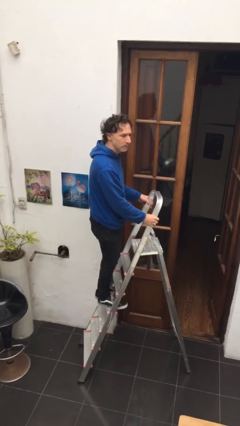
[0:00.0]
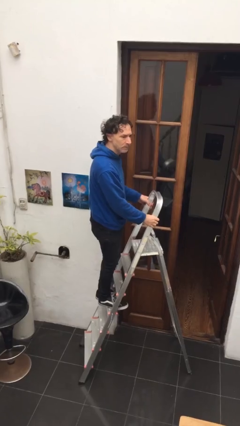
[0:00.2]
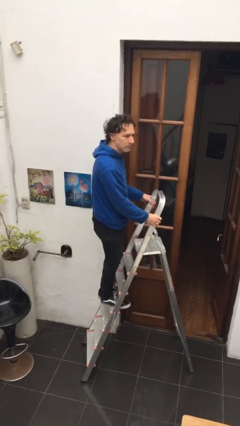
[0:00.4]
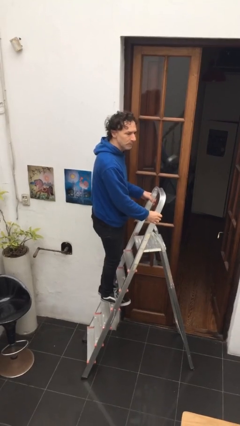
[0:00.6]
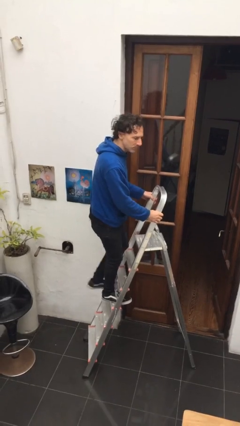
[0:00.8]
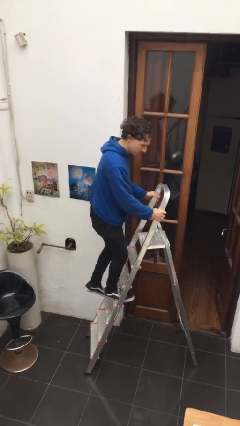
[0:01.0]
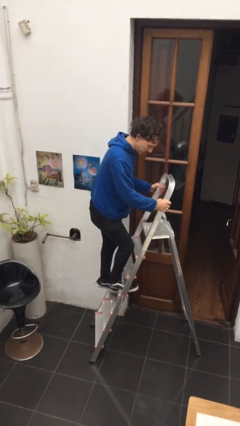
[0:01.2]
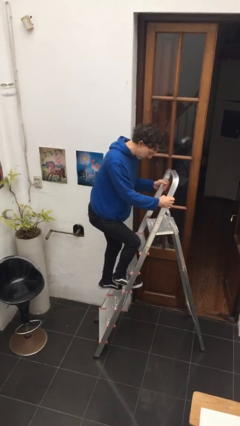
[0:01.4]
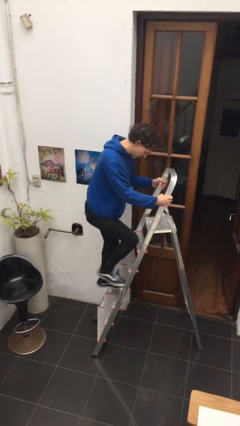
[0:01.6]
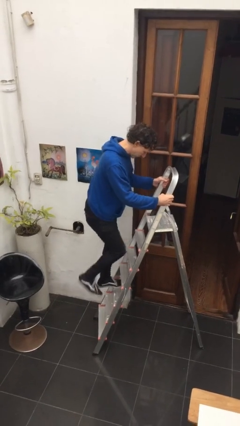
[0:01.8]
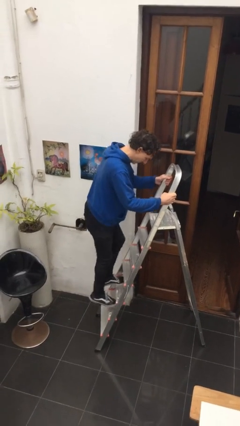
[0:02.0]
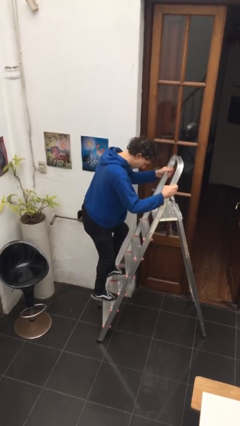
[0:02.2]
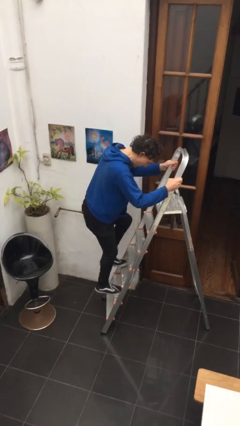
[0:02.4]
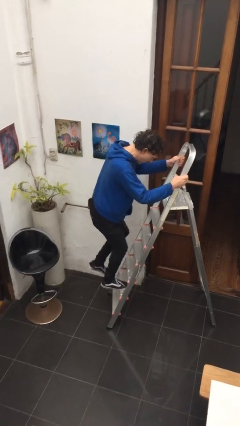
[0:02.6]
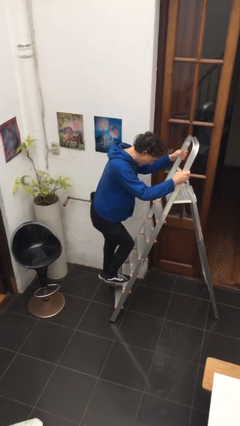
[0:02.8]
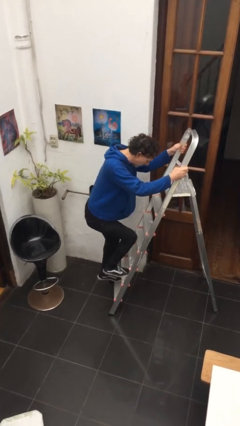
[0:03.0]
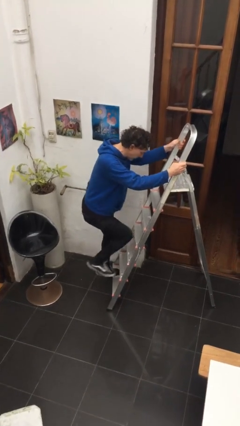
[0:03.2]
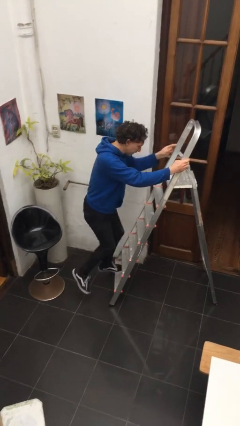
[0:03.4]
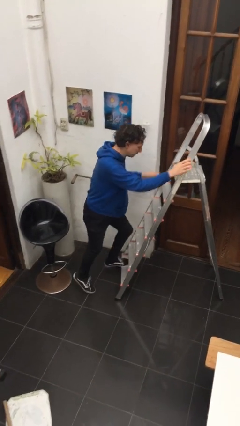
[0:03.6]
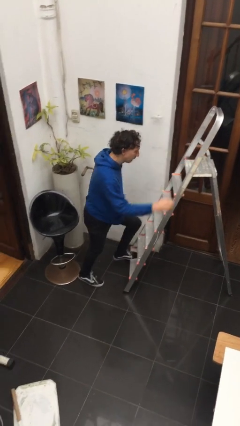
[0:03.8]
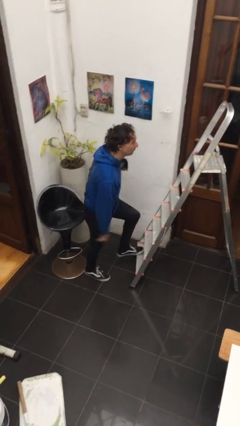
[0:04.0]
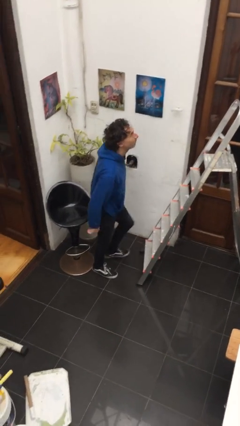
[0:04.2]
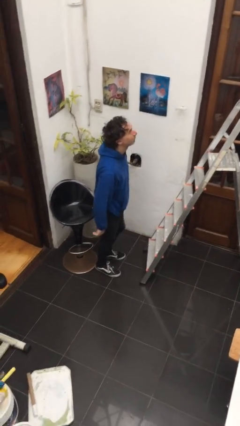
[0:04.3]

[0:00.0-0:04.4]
person climbs down ladder

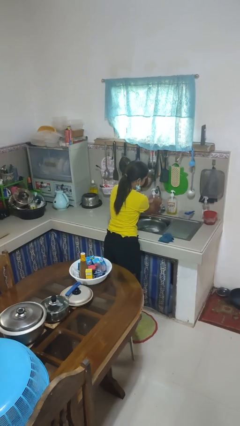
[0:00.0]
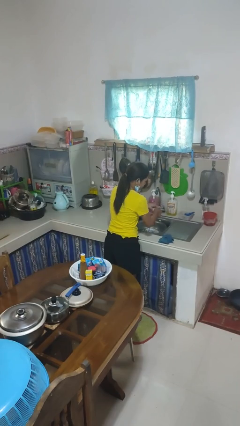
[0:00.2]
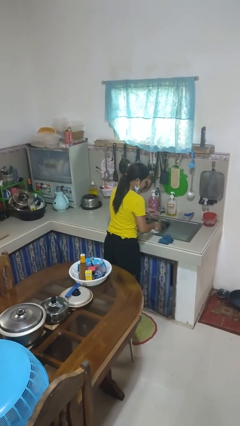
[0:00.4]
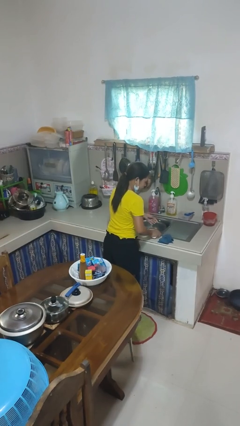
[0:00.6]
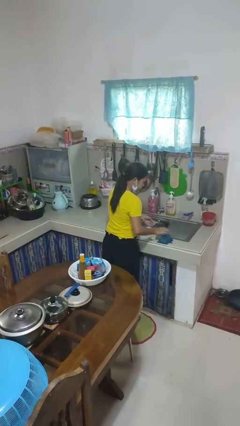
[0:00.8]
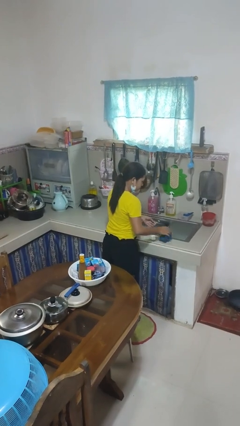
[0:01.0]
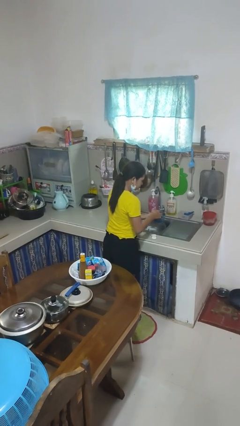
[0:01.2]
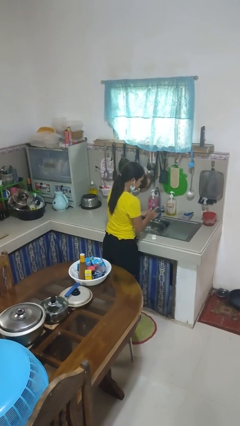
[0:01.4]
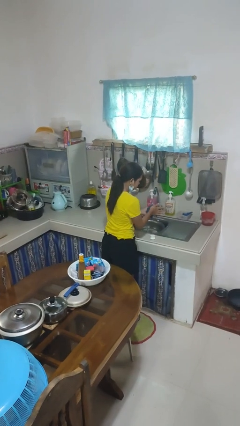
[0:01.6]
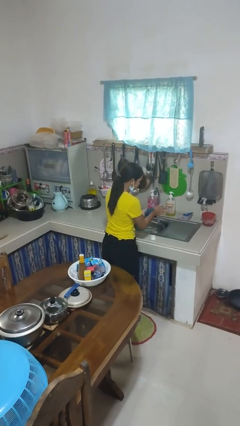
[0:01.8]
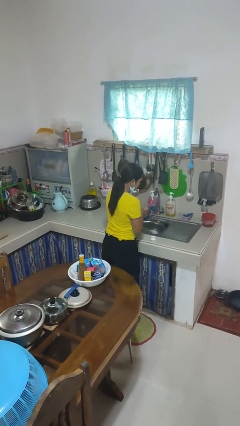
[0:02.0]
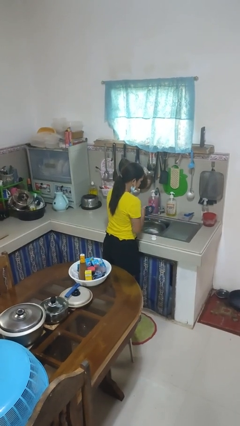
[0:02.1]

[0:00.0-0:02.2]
person dries hands with towel

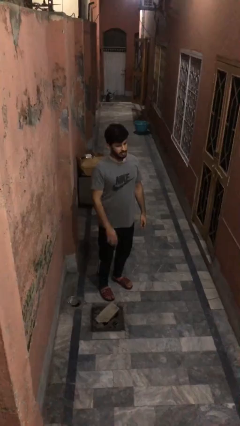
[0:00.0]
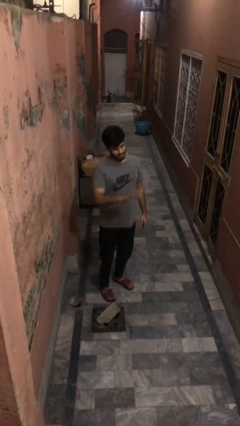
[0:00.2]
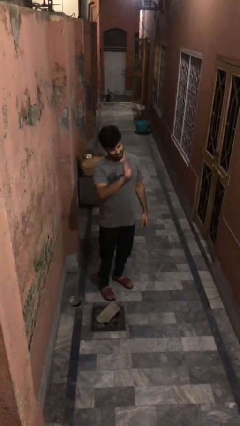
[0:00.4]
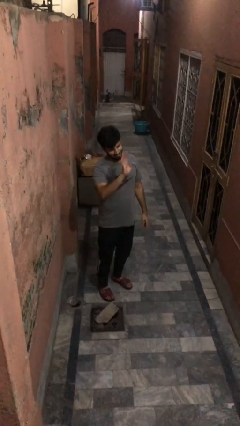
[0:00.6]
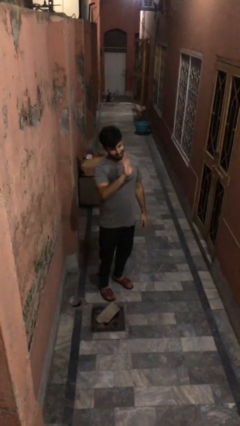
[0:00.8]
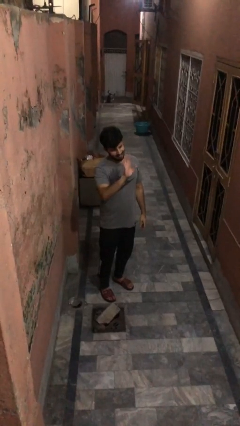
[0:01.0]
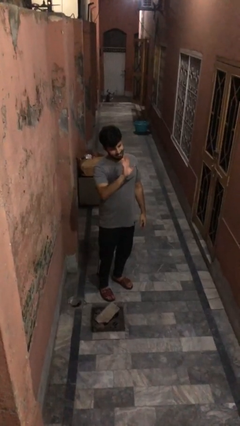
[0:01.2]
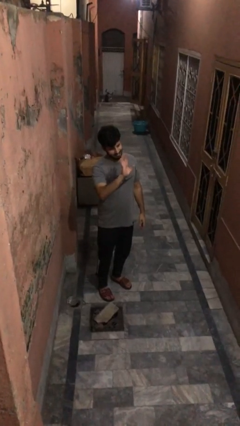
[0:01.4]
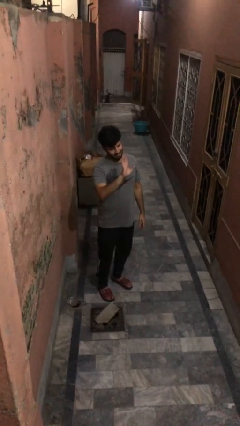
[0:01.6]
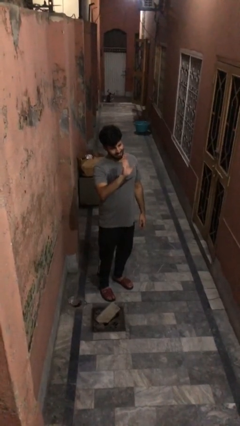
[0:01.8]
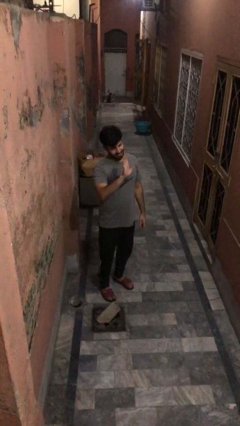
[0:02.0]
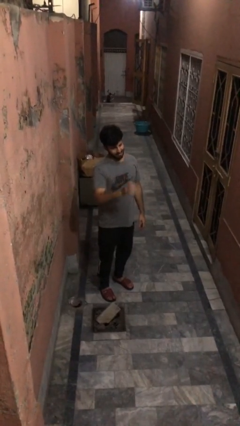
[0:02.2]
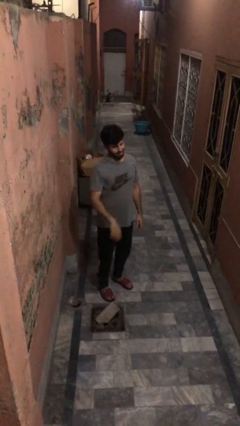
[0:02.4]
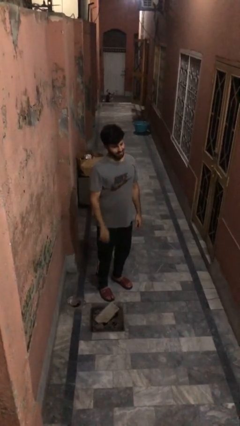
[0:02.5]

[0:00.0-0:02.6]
person waves at person

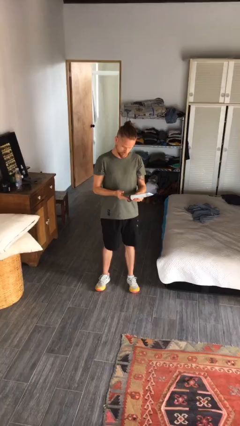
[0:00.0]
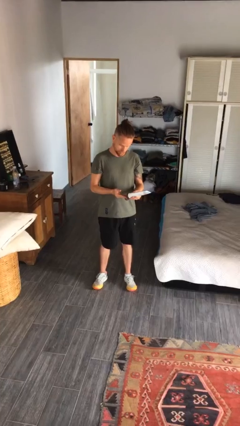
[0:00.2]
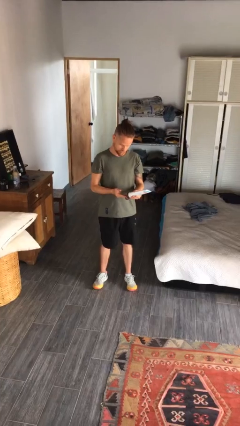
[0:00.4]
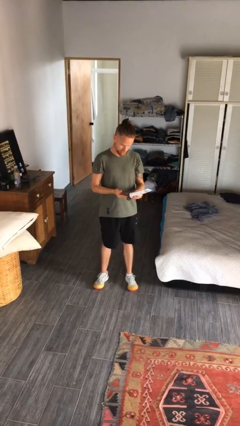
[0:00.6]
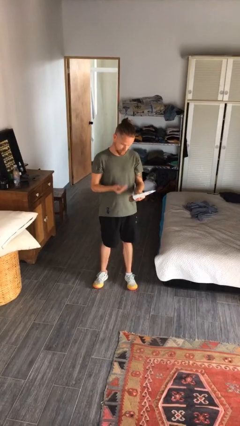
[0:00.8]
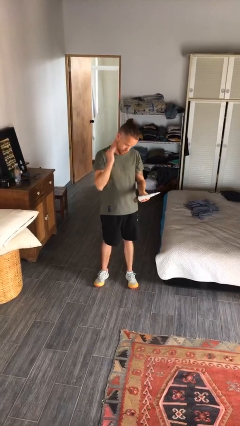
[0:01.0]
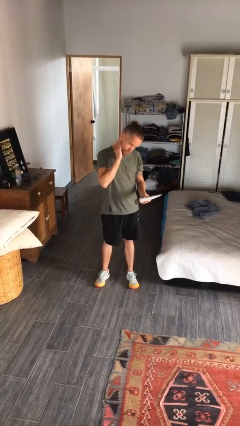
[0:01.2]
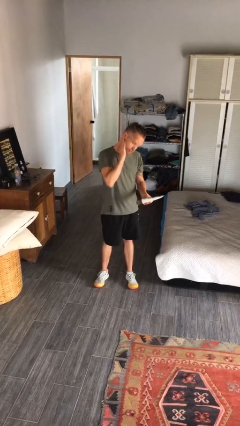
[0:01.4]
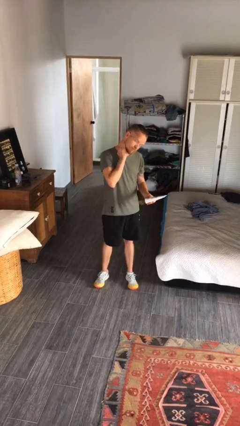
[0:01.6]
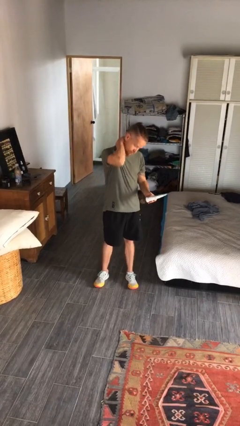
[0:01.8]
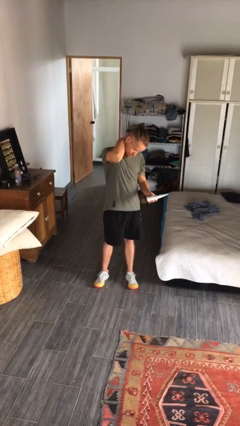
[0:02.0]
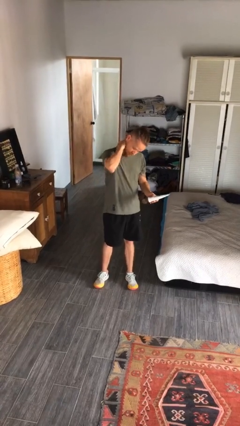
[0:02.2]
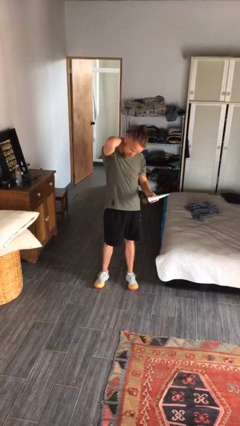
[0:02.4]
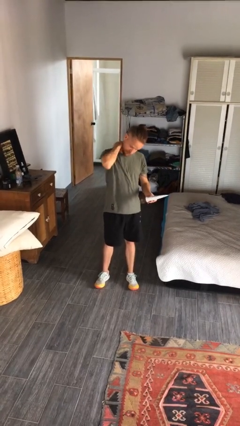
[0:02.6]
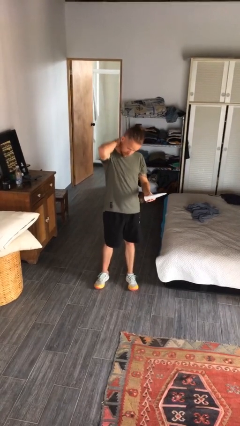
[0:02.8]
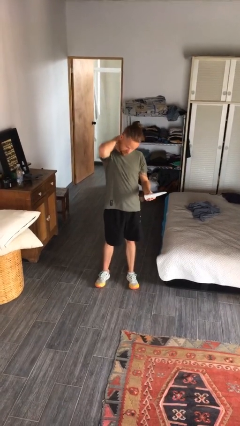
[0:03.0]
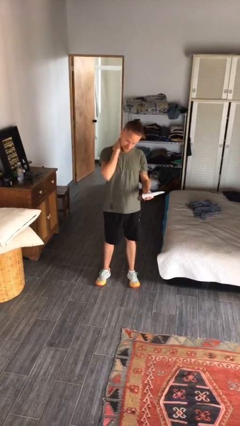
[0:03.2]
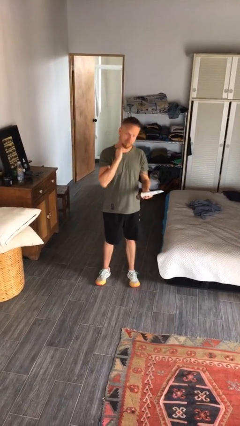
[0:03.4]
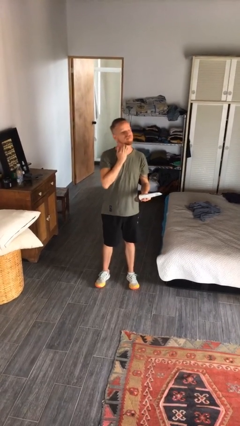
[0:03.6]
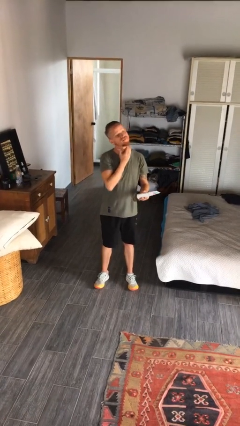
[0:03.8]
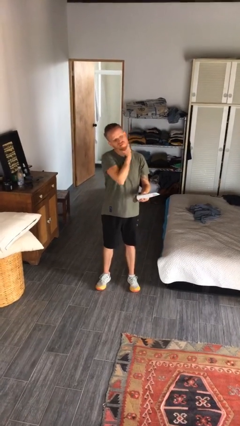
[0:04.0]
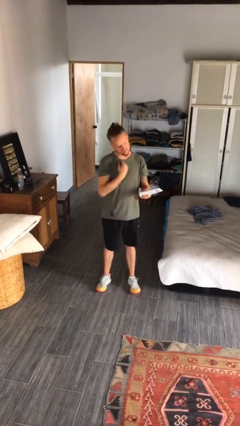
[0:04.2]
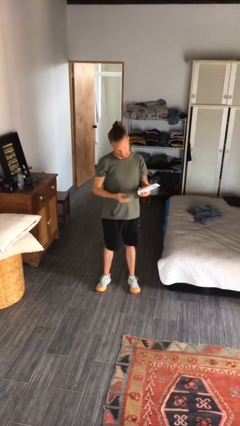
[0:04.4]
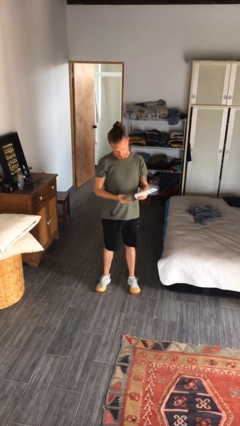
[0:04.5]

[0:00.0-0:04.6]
person applies sunscreen

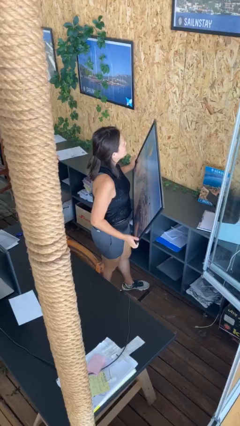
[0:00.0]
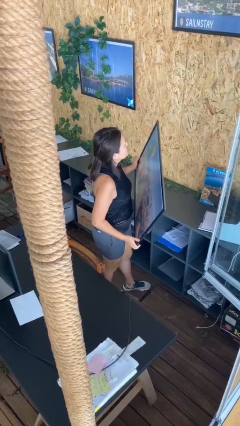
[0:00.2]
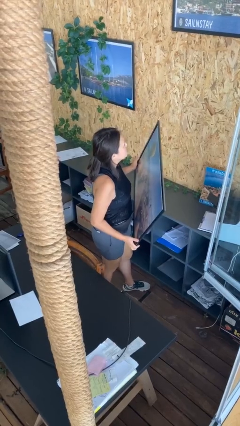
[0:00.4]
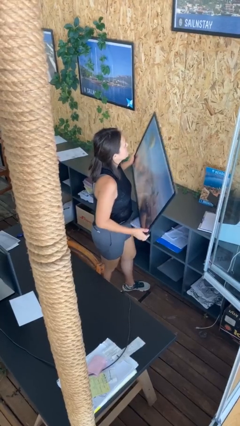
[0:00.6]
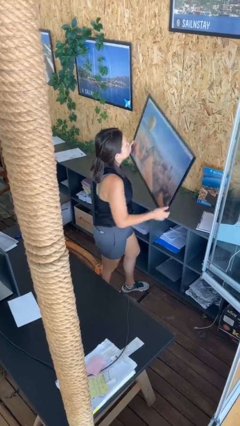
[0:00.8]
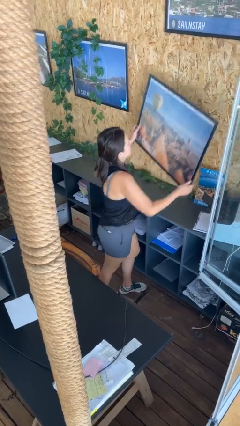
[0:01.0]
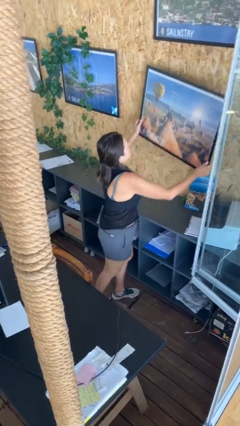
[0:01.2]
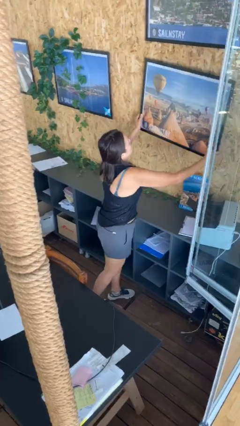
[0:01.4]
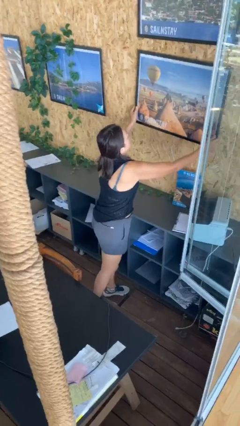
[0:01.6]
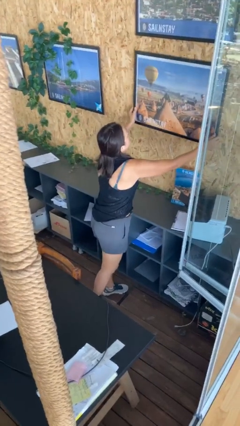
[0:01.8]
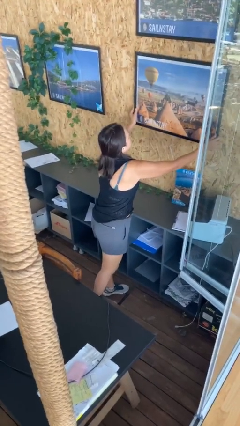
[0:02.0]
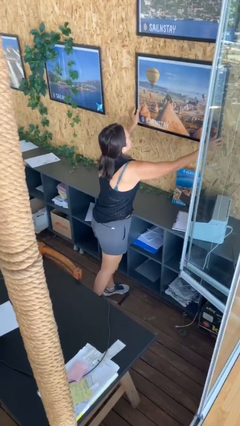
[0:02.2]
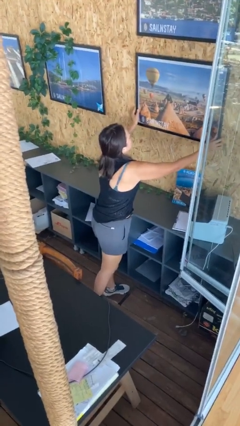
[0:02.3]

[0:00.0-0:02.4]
person puts up picture frame

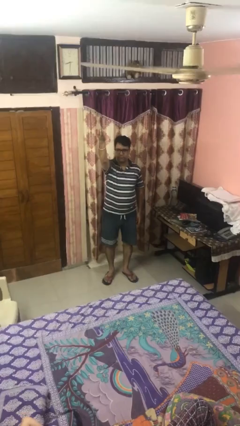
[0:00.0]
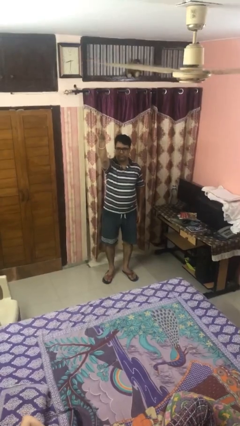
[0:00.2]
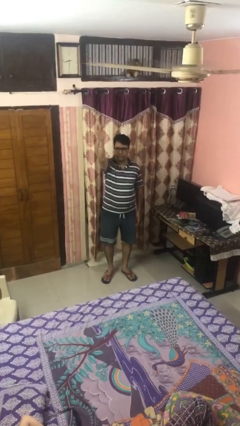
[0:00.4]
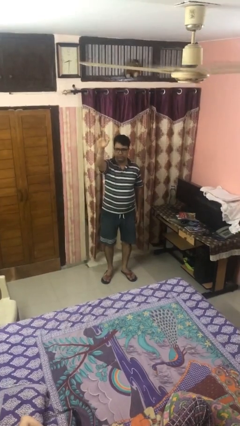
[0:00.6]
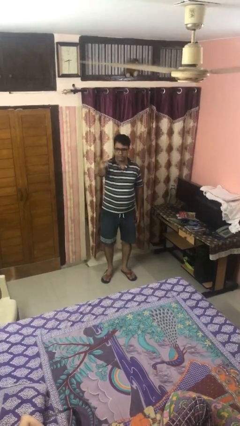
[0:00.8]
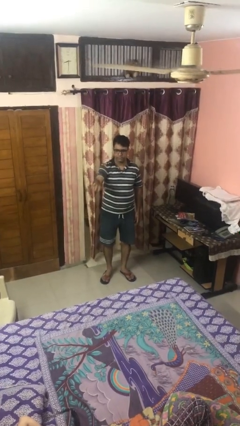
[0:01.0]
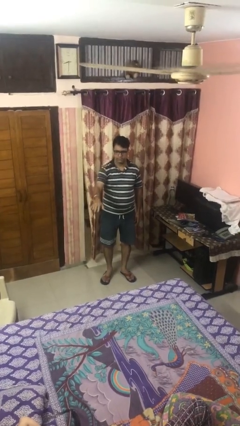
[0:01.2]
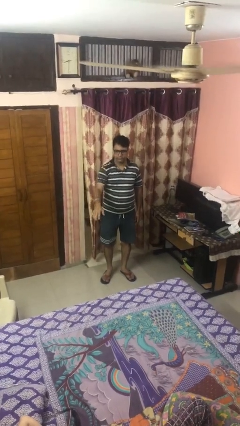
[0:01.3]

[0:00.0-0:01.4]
person gestures swipe down
